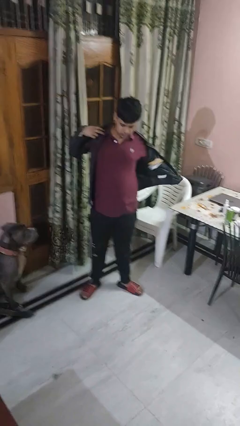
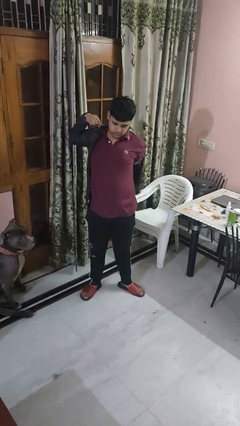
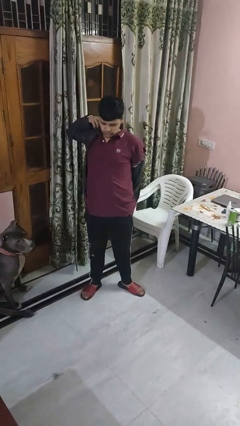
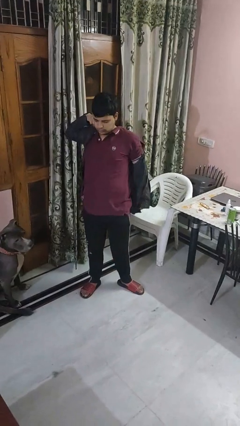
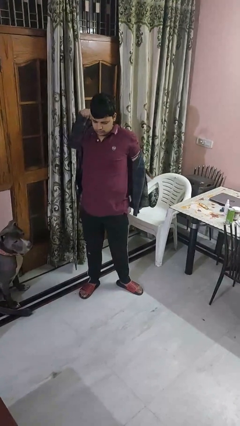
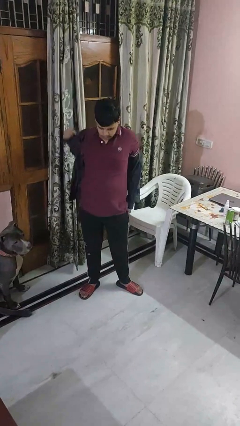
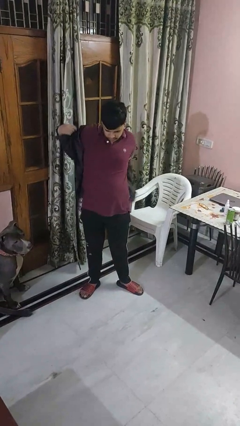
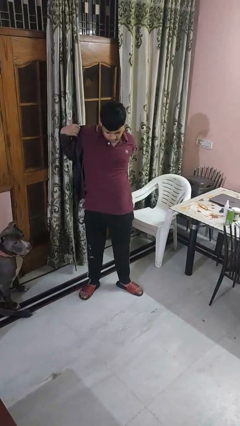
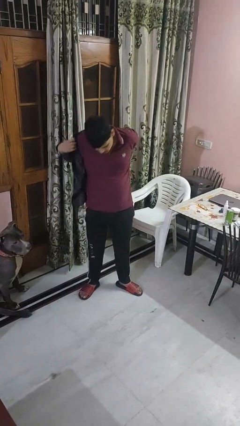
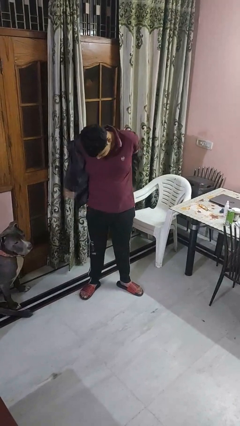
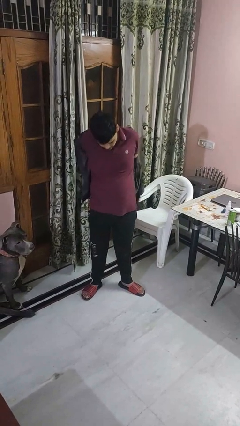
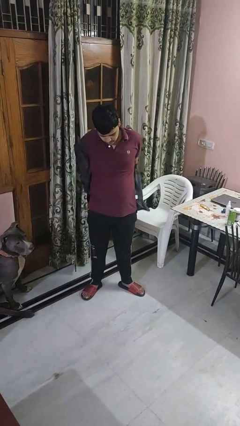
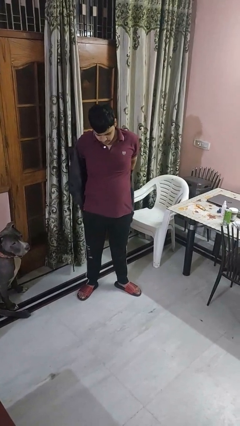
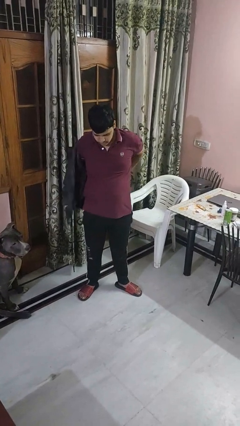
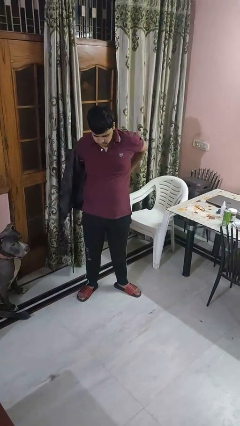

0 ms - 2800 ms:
person takes off shirt

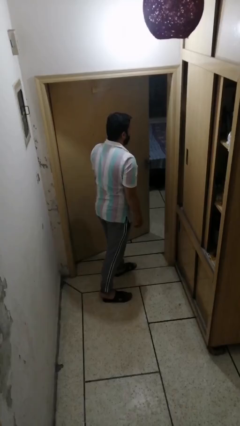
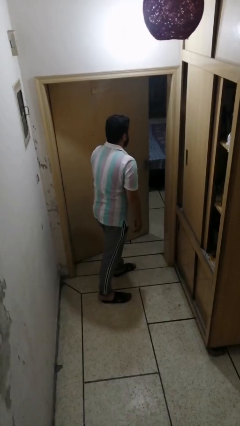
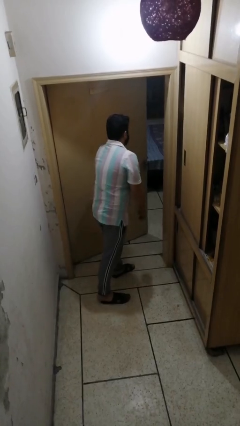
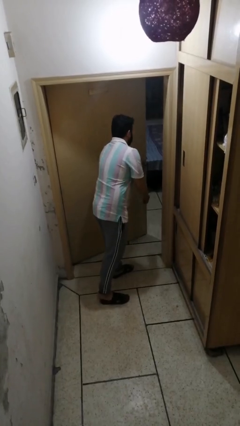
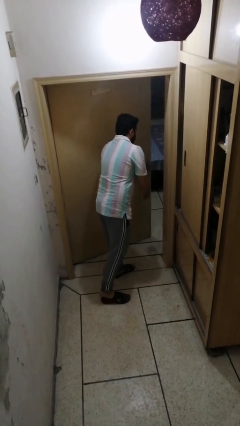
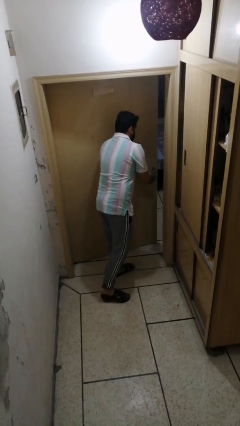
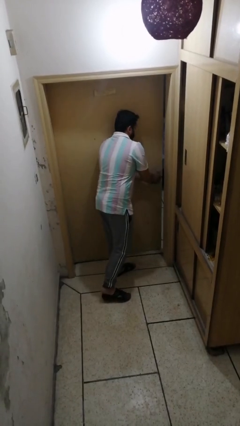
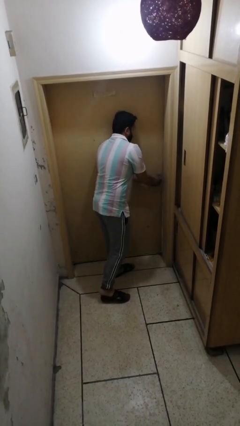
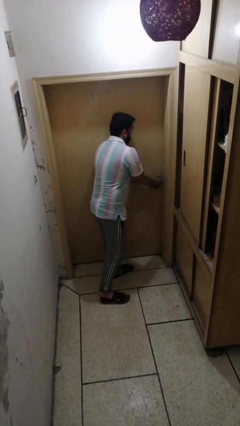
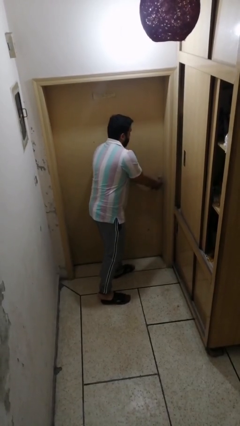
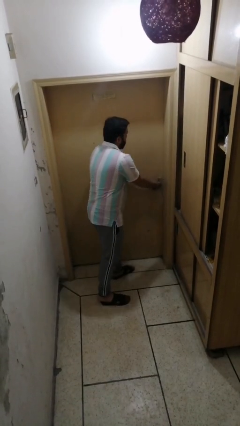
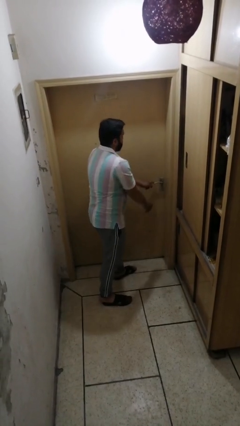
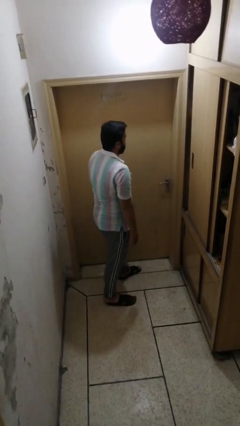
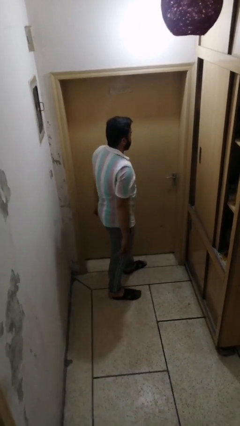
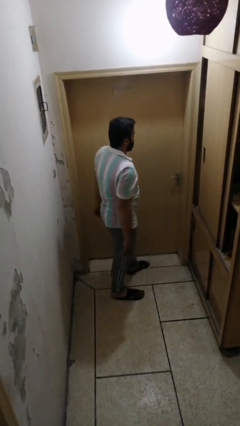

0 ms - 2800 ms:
person closes facility door

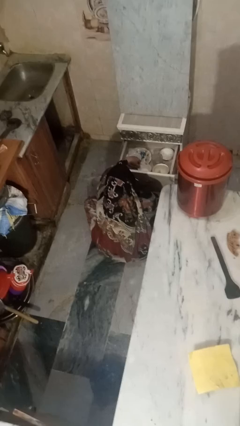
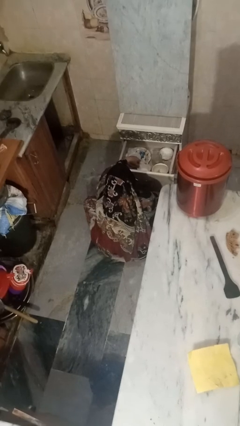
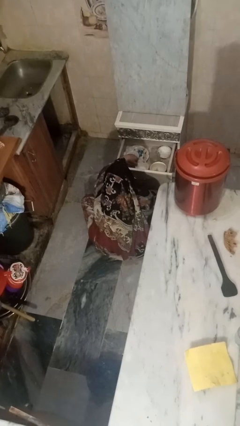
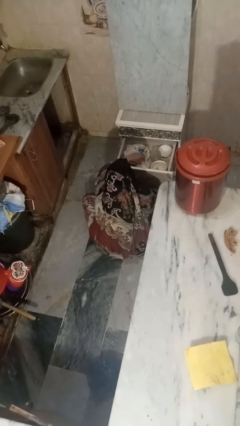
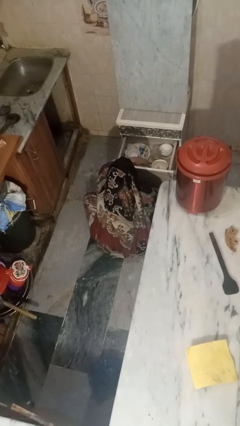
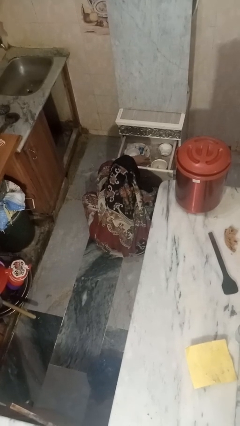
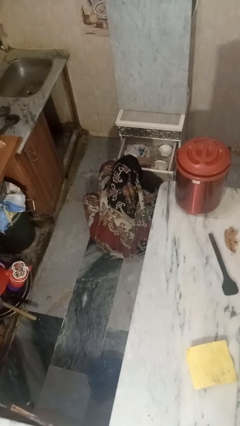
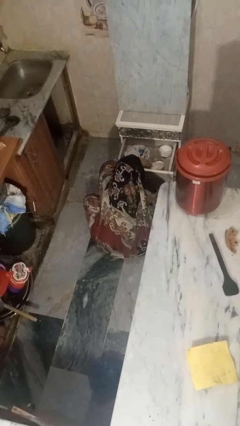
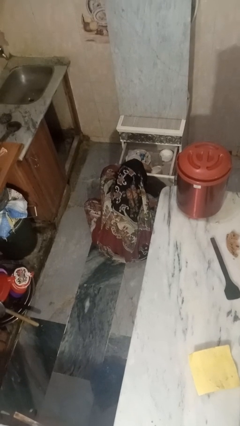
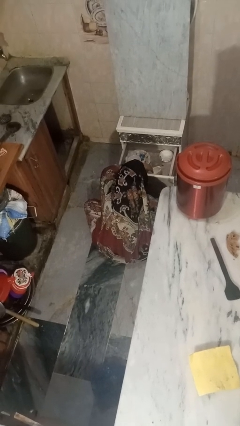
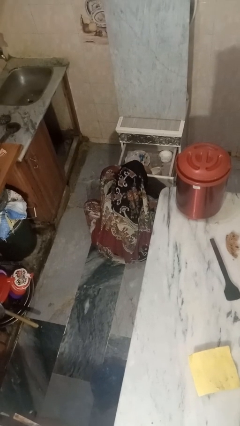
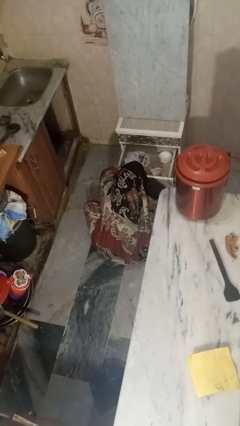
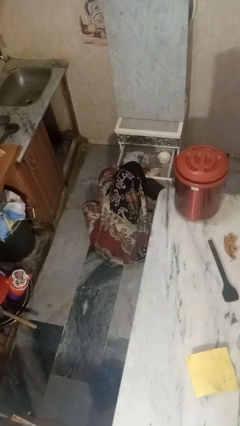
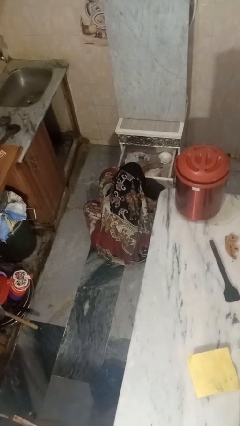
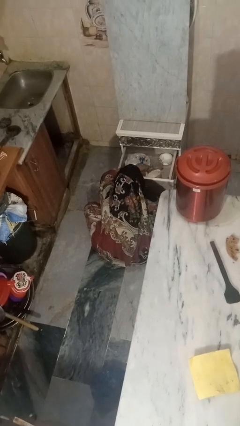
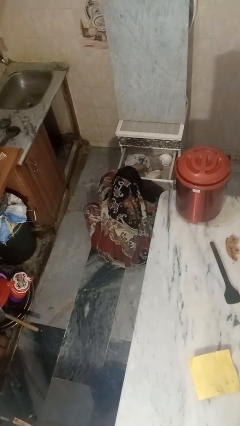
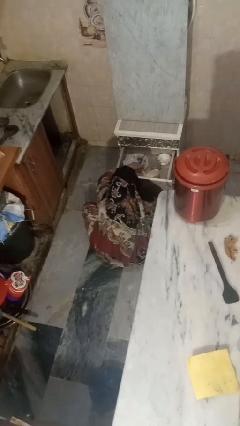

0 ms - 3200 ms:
person searches in kitchen drawer

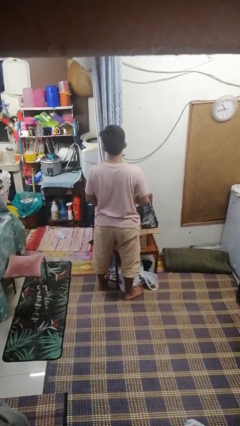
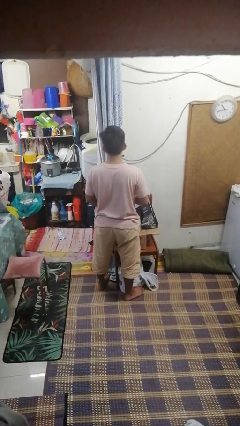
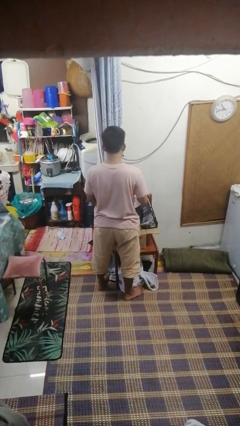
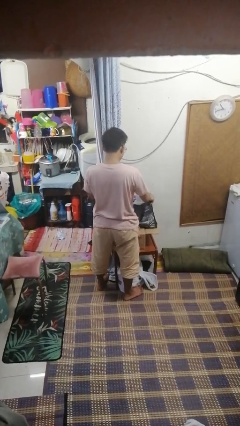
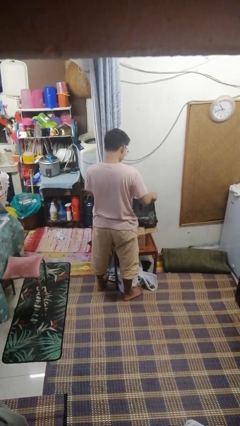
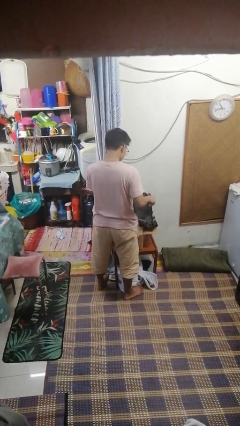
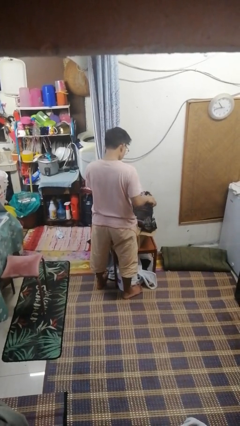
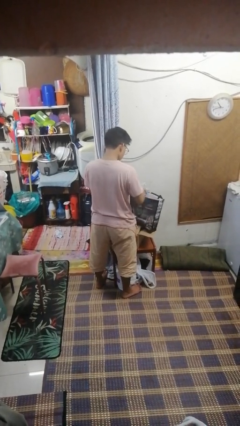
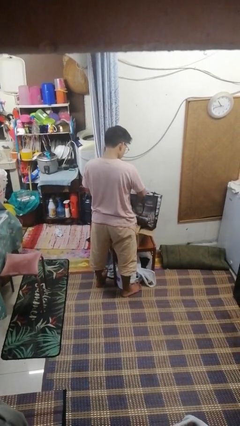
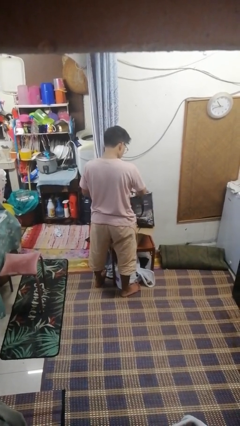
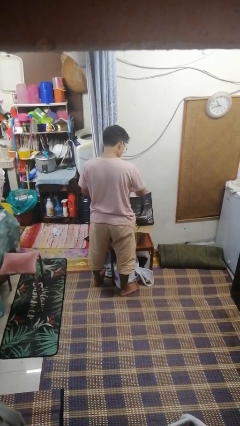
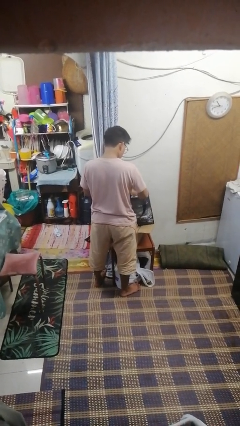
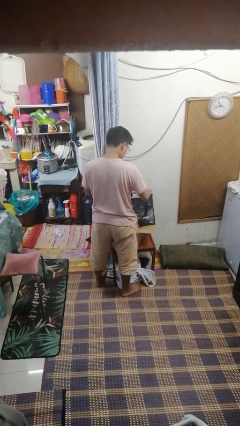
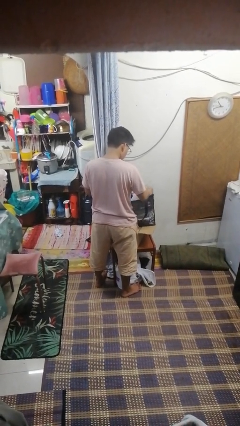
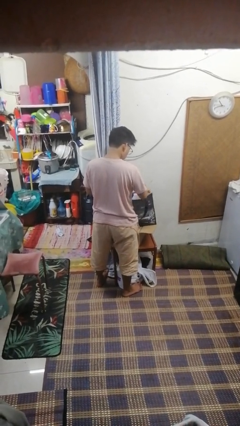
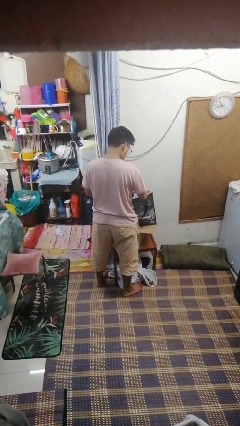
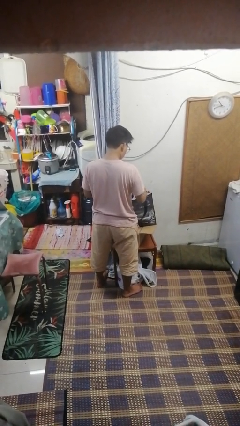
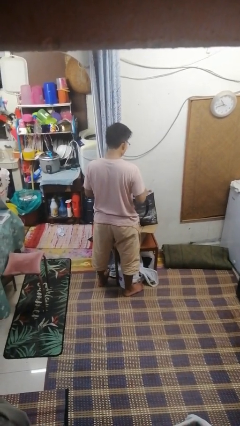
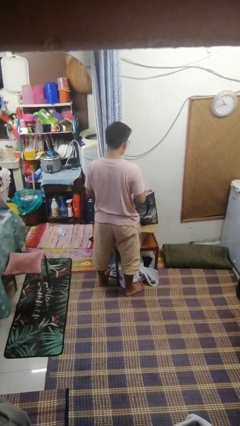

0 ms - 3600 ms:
person searches in bag

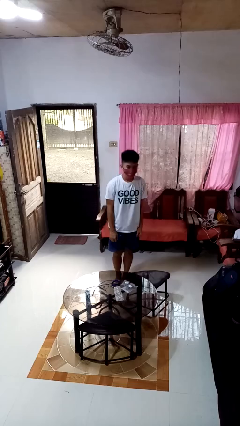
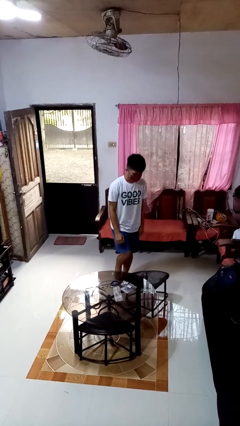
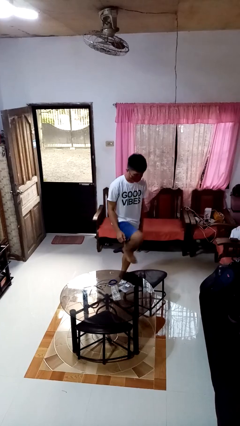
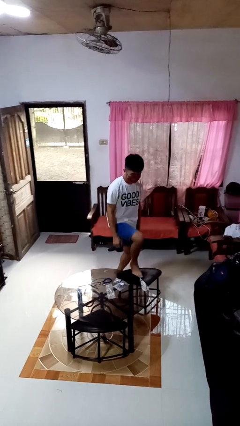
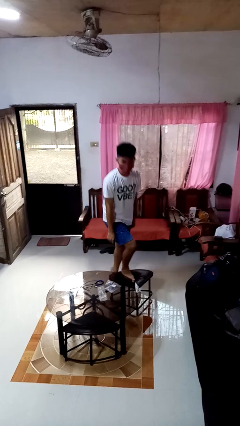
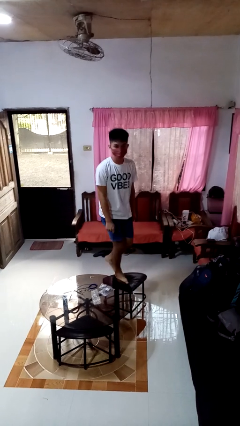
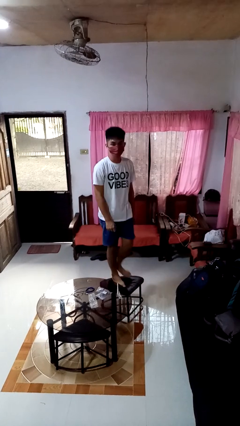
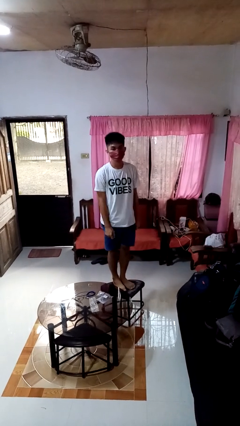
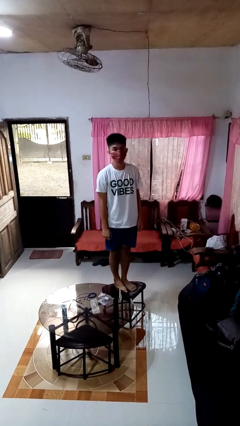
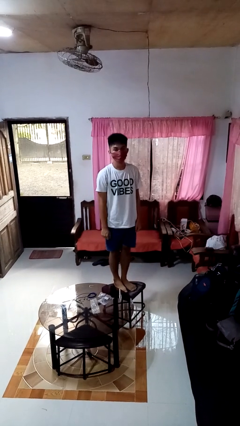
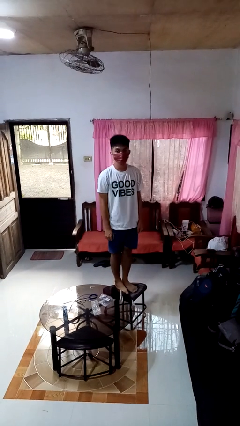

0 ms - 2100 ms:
person climbs on chair

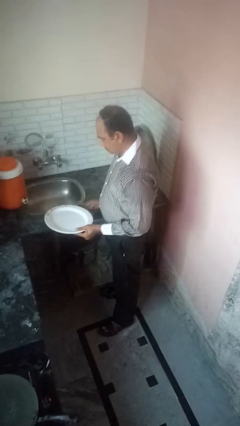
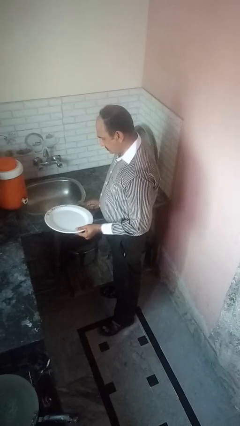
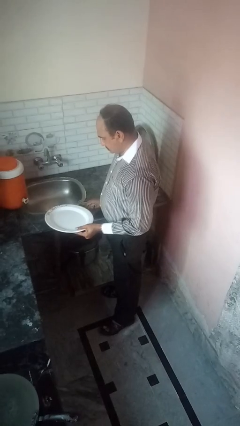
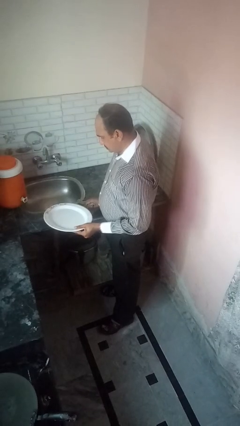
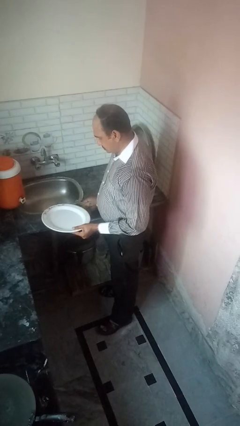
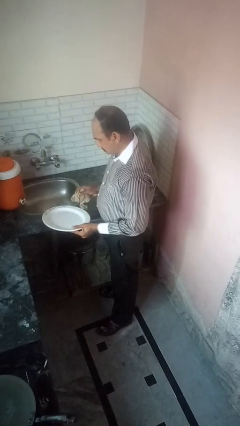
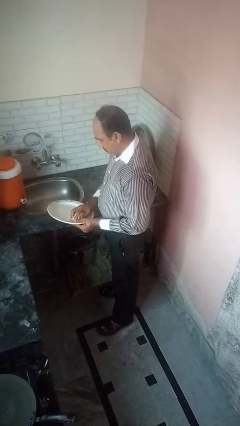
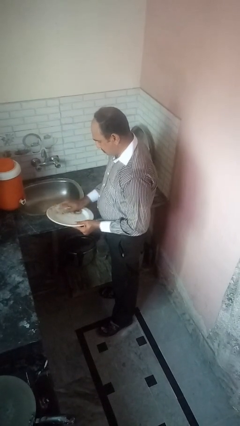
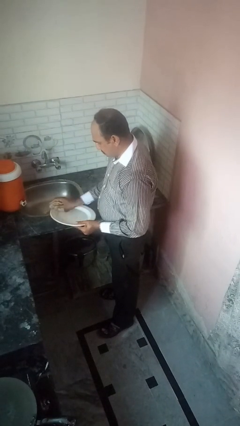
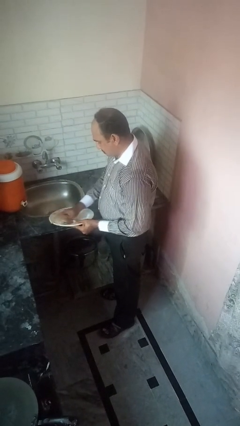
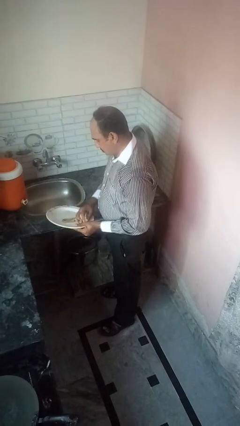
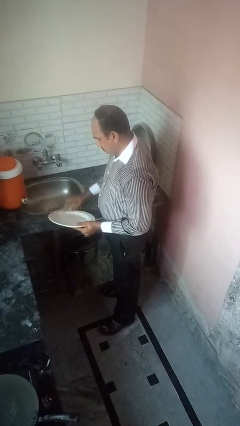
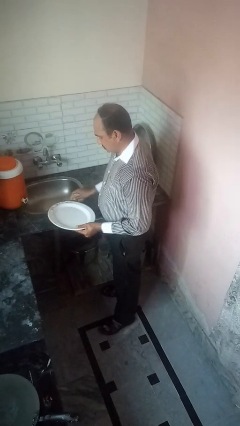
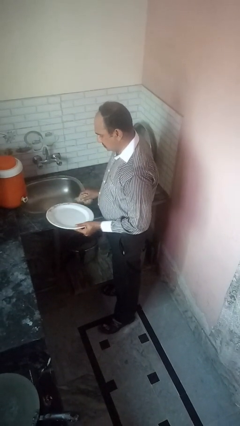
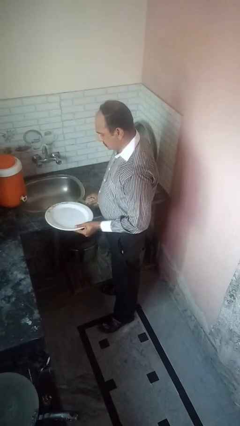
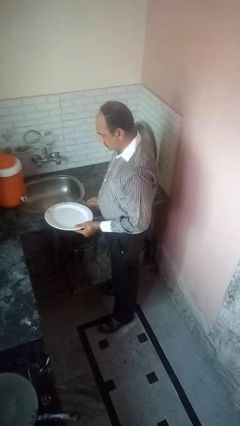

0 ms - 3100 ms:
person dries dish
